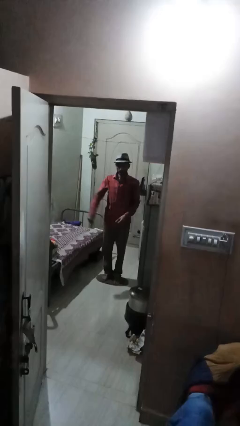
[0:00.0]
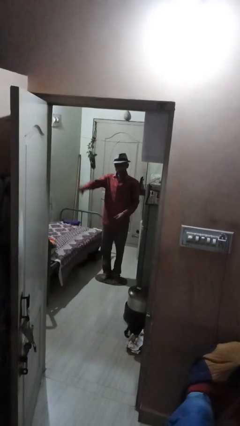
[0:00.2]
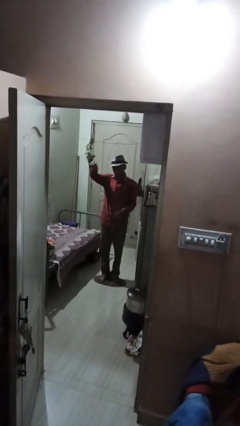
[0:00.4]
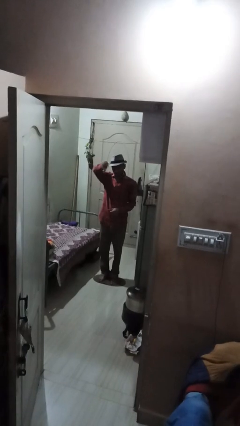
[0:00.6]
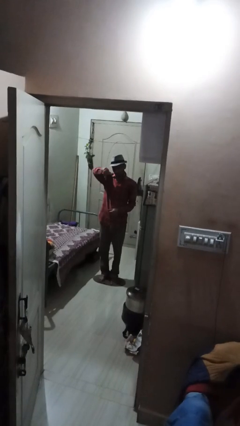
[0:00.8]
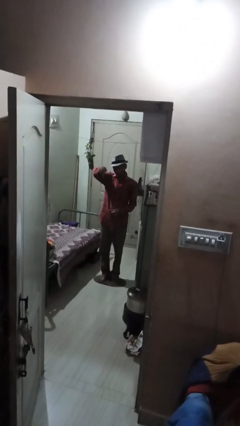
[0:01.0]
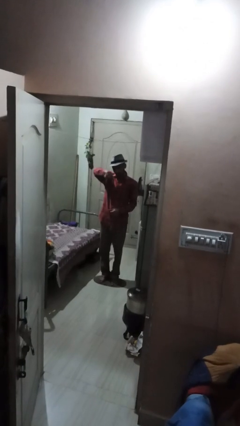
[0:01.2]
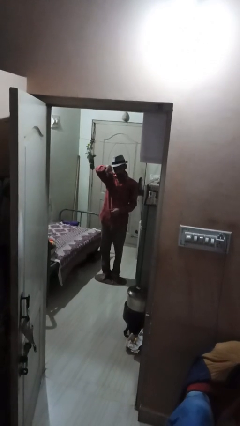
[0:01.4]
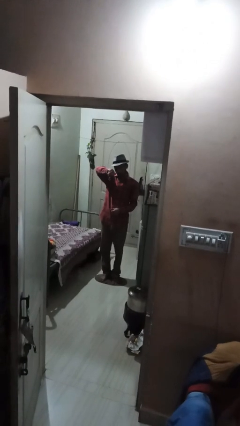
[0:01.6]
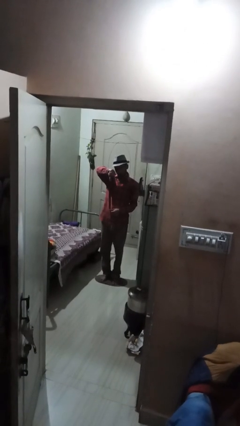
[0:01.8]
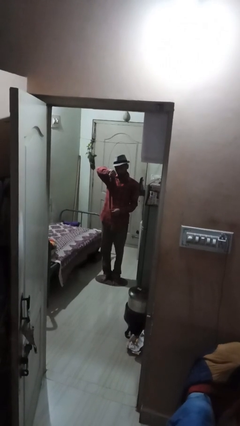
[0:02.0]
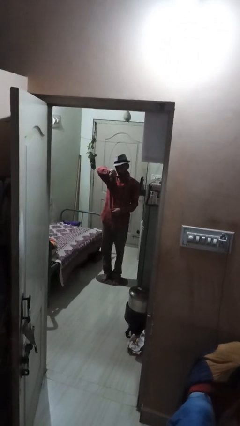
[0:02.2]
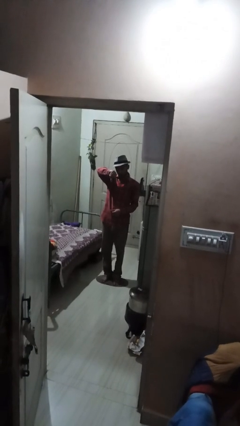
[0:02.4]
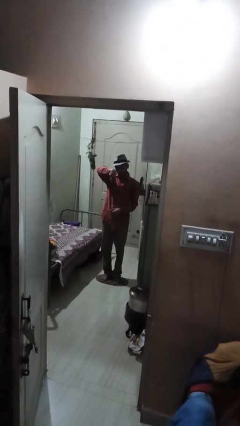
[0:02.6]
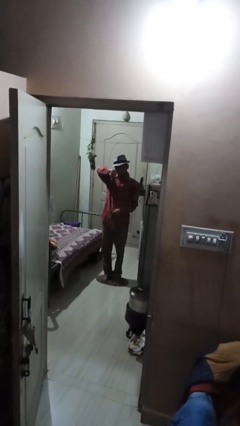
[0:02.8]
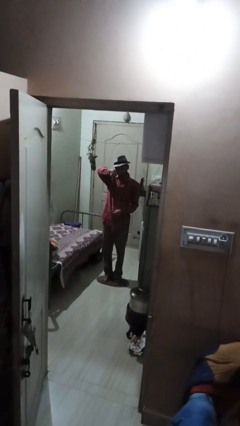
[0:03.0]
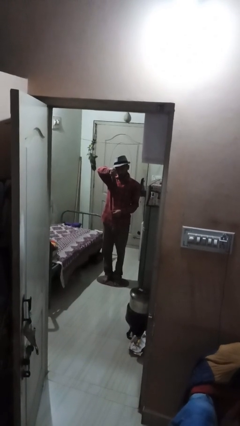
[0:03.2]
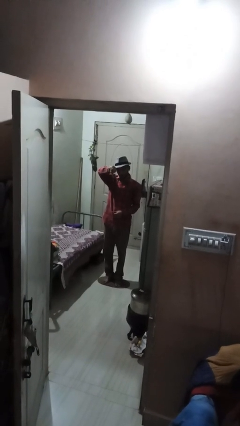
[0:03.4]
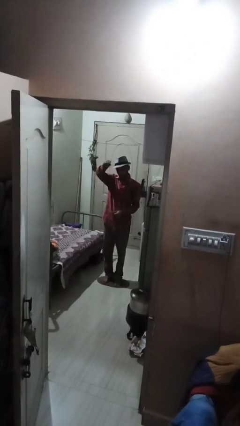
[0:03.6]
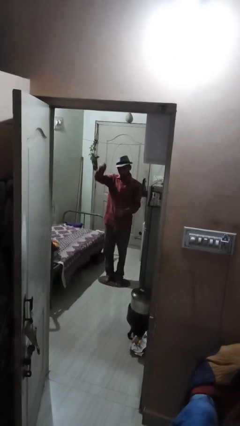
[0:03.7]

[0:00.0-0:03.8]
person gestures thumbs down

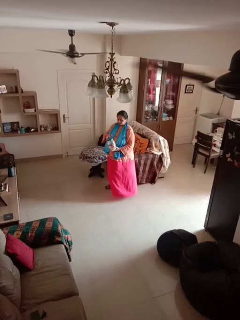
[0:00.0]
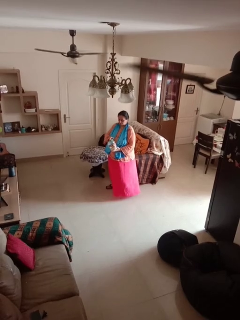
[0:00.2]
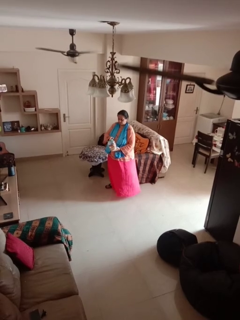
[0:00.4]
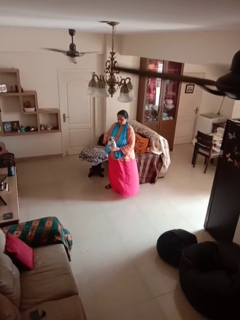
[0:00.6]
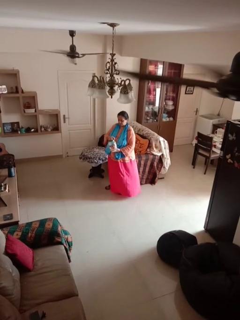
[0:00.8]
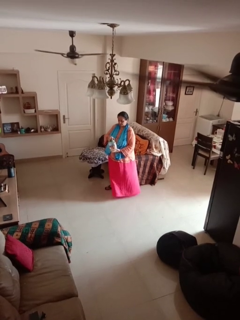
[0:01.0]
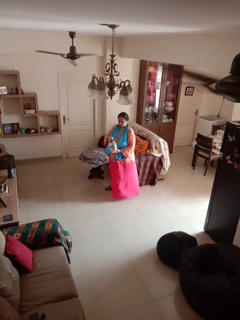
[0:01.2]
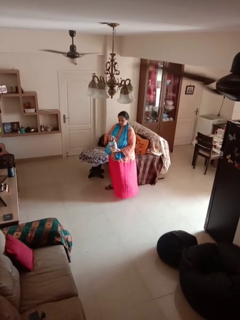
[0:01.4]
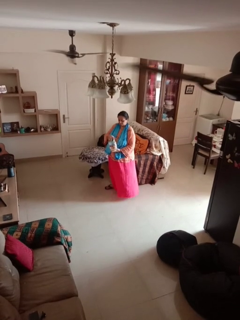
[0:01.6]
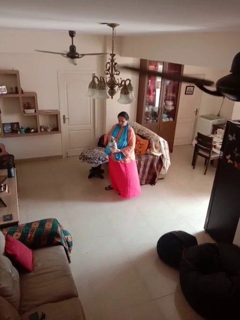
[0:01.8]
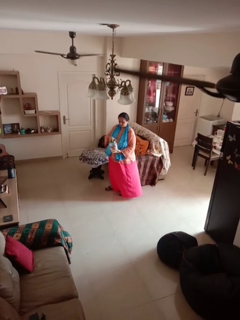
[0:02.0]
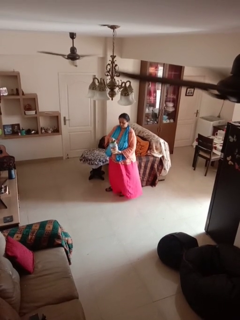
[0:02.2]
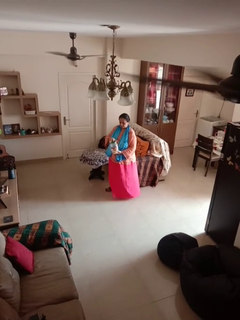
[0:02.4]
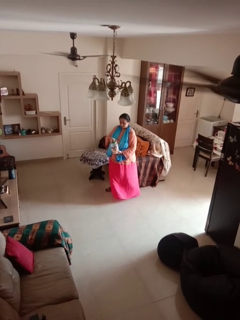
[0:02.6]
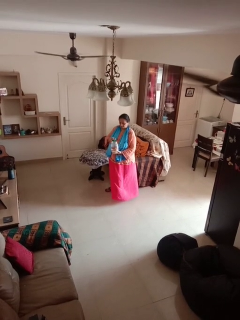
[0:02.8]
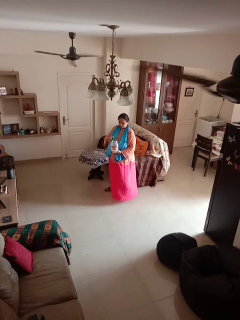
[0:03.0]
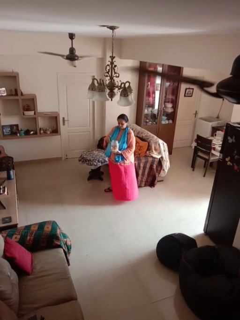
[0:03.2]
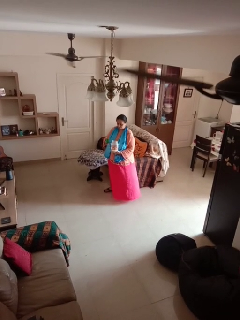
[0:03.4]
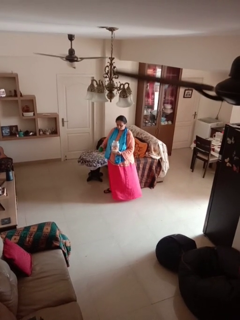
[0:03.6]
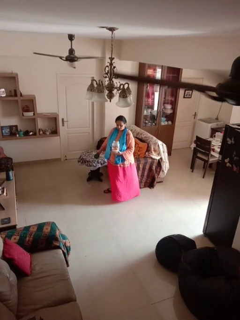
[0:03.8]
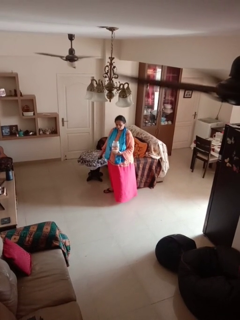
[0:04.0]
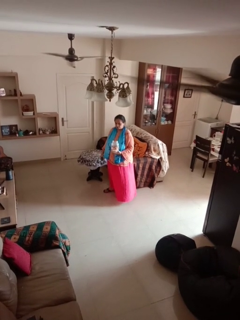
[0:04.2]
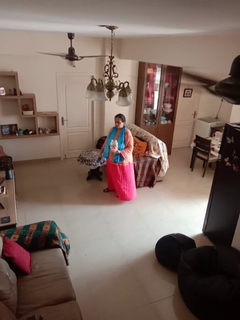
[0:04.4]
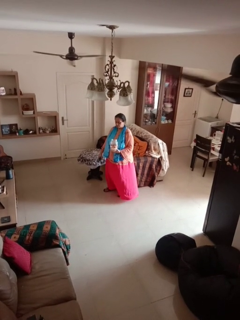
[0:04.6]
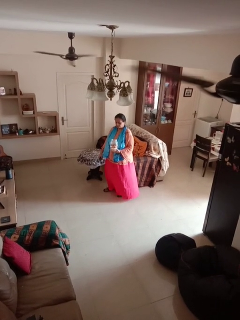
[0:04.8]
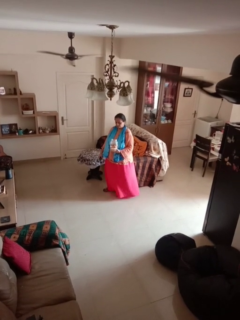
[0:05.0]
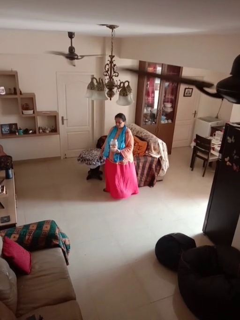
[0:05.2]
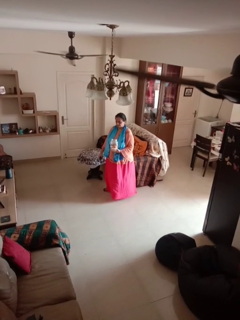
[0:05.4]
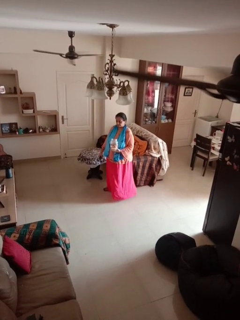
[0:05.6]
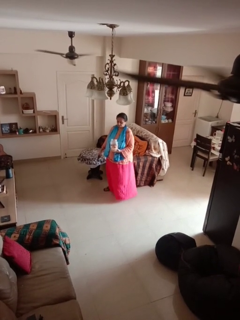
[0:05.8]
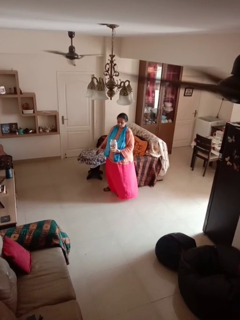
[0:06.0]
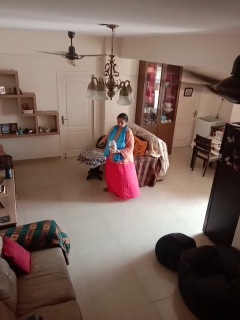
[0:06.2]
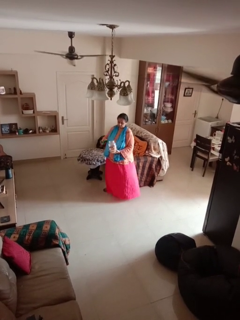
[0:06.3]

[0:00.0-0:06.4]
person opens jar

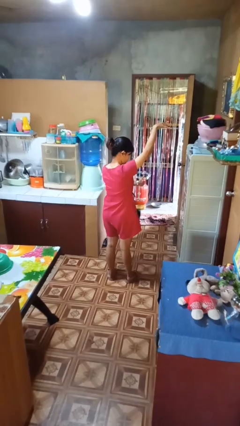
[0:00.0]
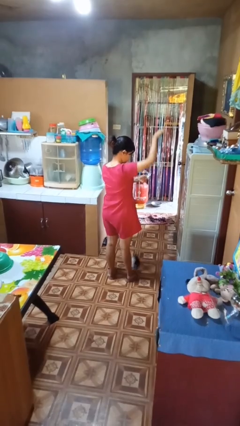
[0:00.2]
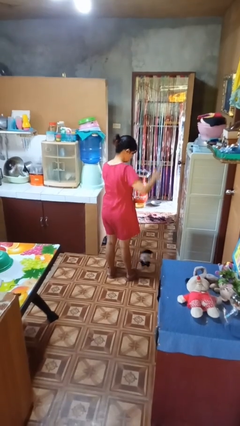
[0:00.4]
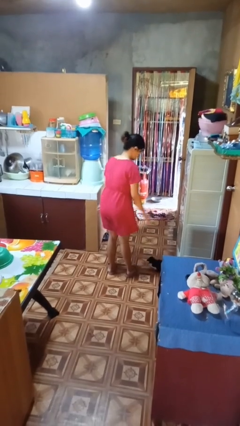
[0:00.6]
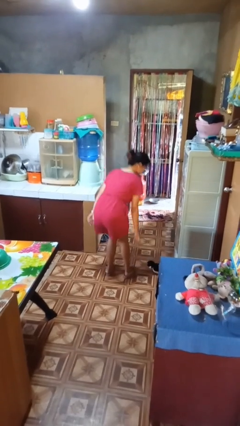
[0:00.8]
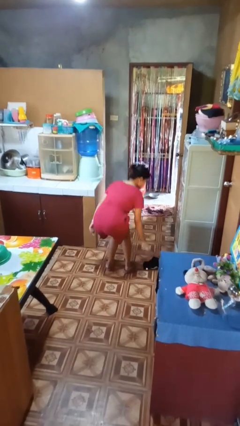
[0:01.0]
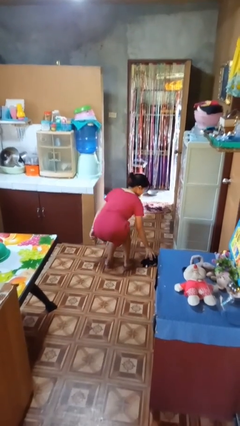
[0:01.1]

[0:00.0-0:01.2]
person catches dropped object

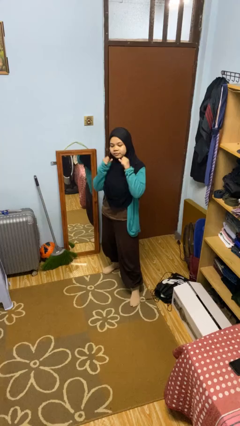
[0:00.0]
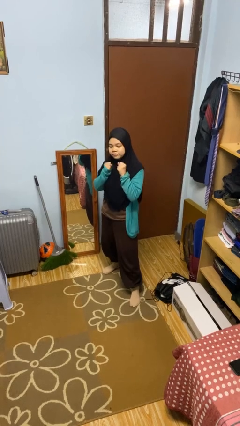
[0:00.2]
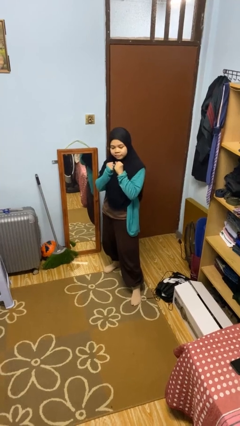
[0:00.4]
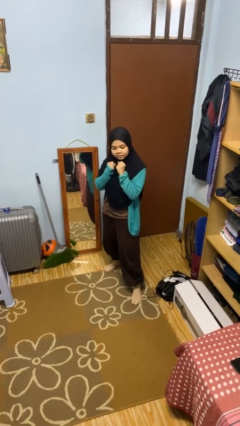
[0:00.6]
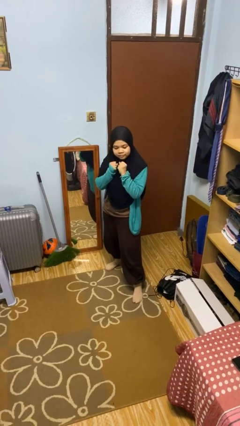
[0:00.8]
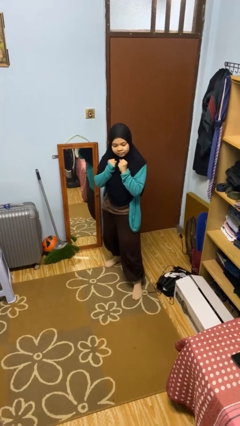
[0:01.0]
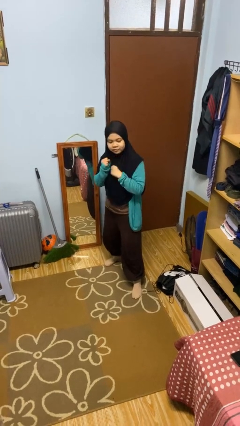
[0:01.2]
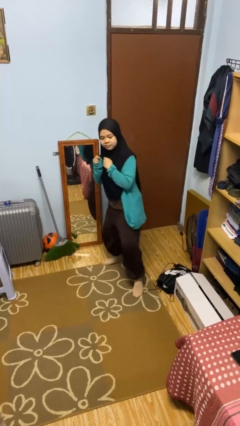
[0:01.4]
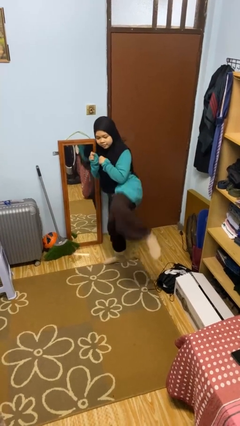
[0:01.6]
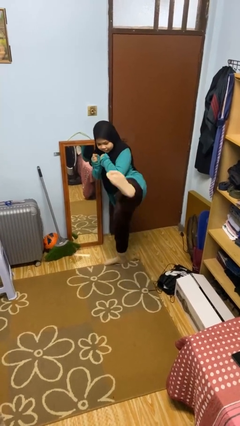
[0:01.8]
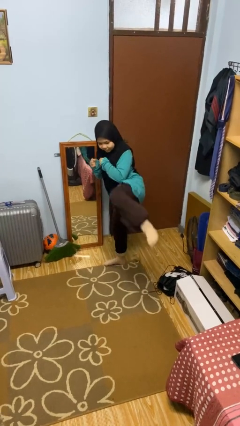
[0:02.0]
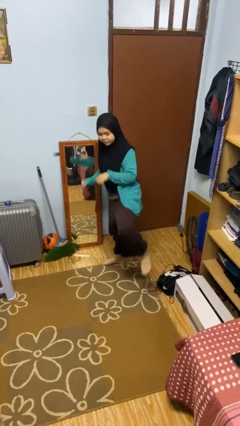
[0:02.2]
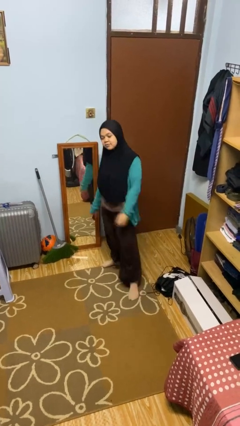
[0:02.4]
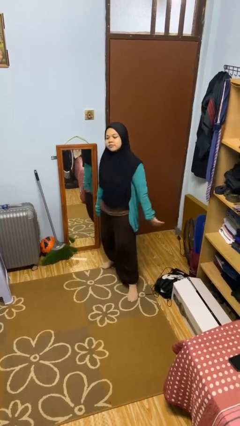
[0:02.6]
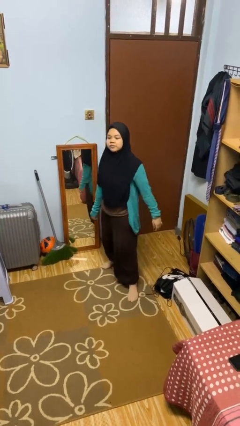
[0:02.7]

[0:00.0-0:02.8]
person karate kicks

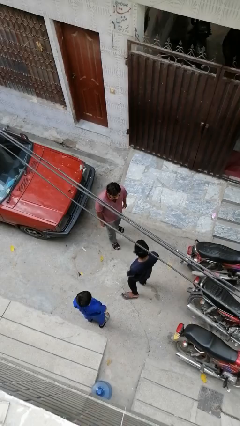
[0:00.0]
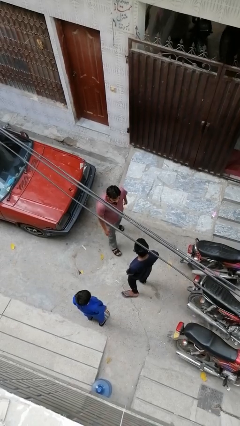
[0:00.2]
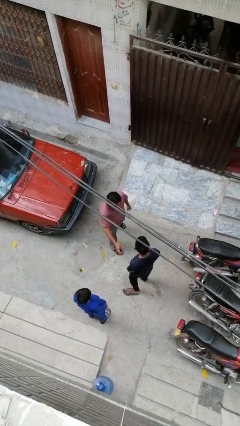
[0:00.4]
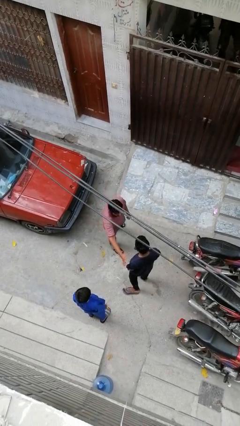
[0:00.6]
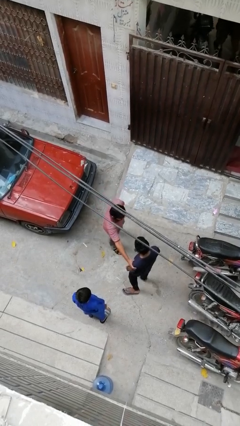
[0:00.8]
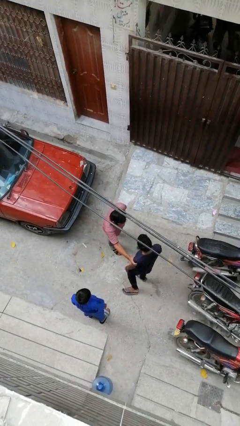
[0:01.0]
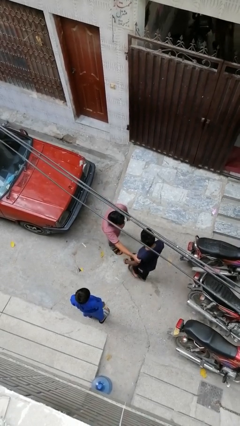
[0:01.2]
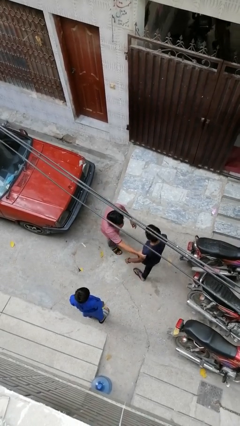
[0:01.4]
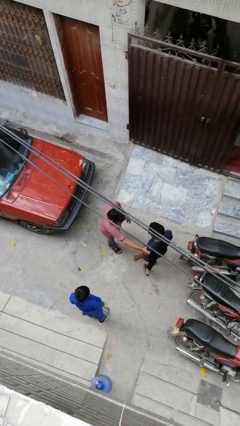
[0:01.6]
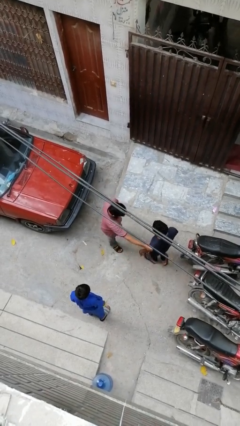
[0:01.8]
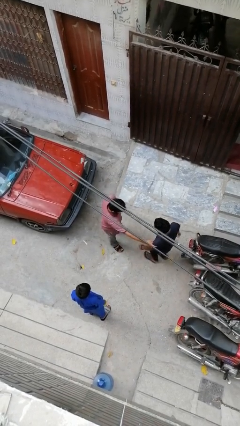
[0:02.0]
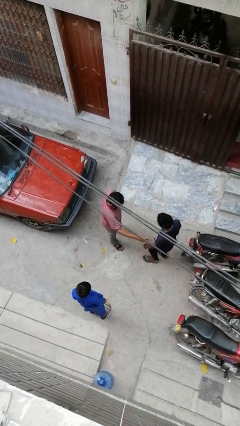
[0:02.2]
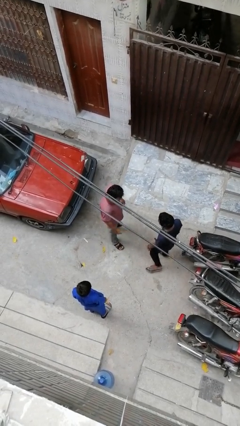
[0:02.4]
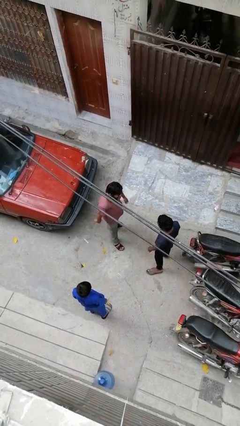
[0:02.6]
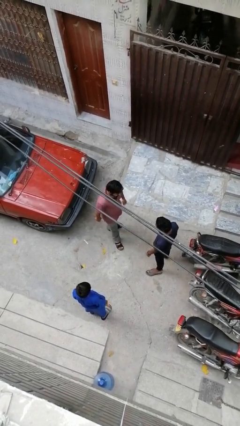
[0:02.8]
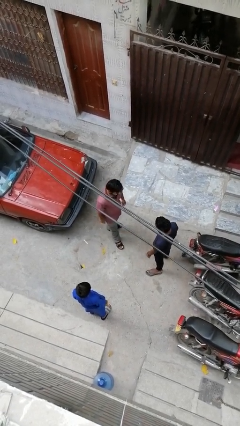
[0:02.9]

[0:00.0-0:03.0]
person shoves person

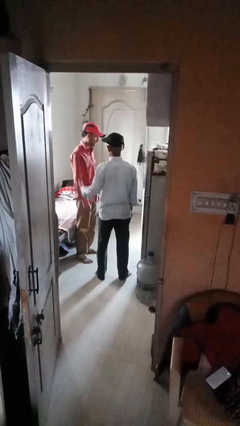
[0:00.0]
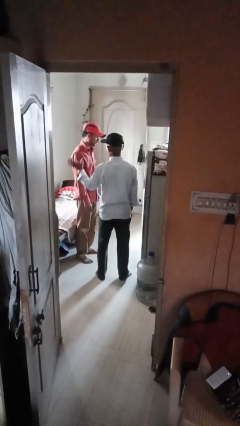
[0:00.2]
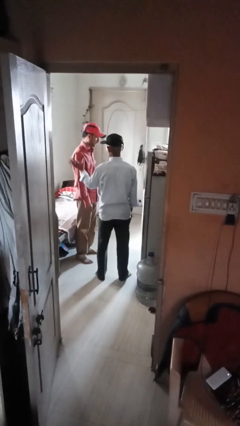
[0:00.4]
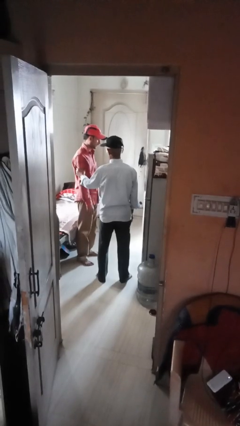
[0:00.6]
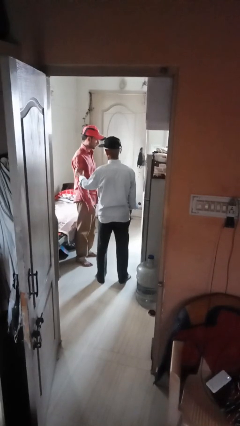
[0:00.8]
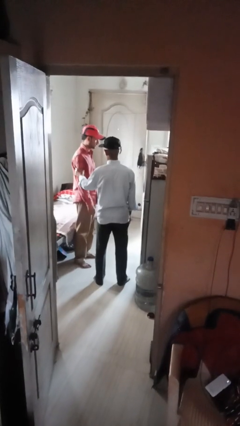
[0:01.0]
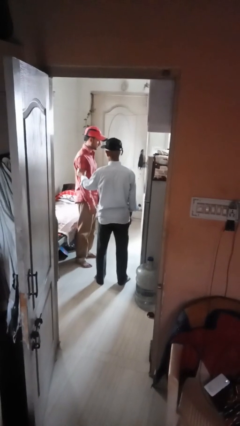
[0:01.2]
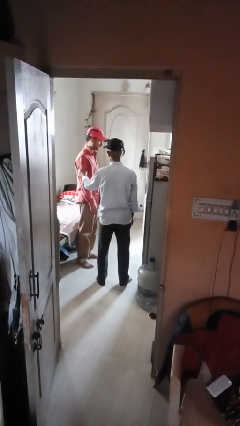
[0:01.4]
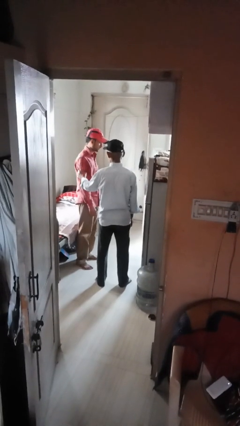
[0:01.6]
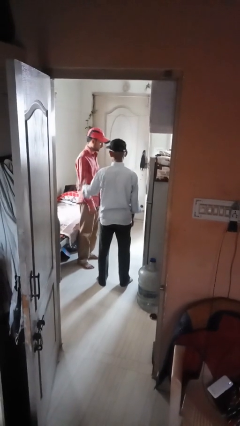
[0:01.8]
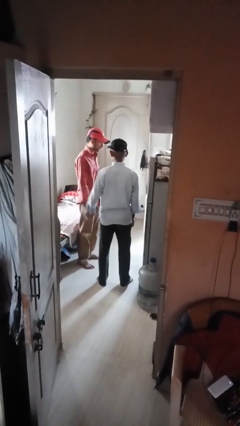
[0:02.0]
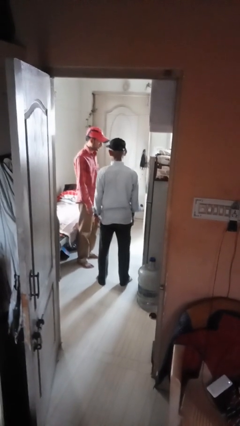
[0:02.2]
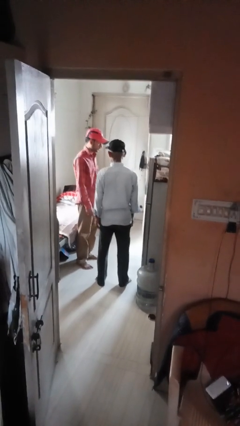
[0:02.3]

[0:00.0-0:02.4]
person grabs person by bicep
